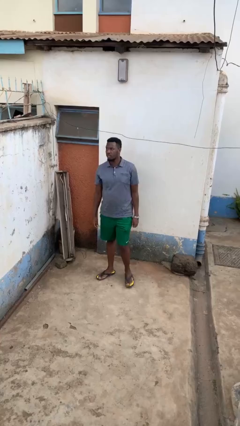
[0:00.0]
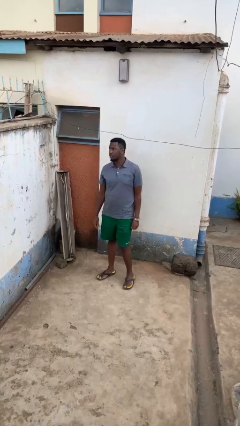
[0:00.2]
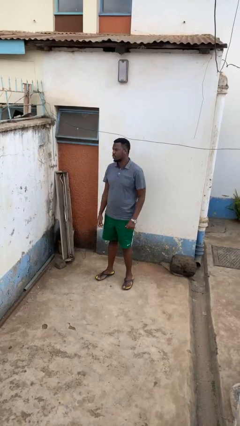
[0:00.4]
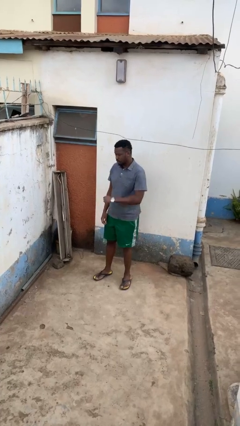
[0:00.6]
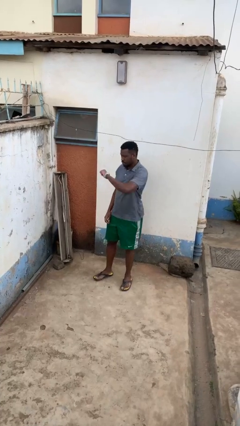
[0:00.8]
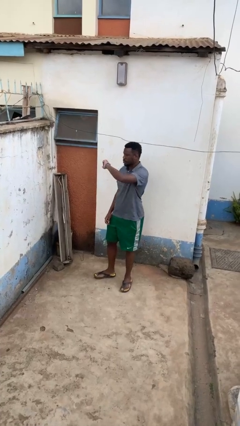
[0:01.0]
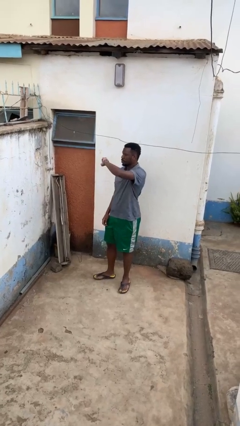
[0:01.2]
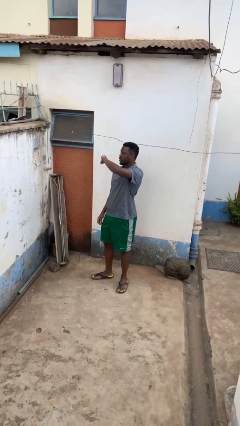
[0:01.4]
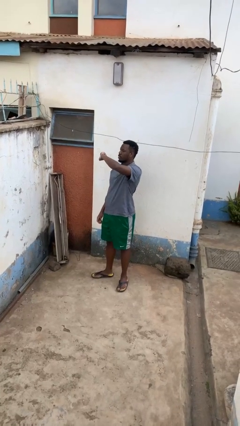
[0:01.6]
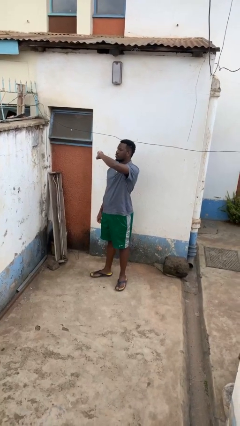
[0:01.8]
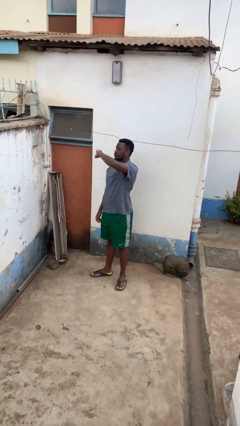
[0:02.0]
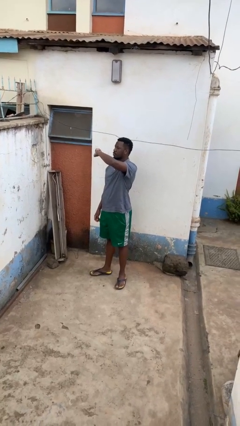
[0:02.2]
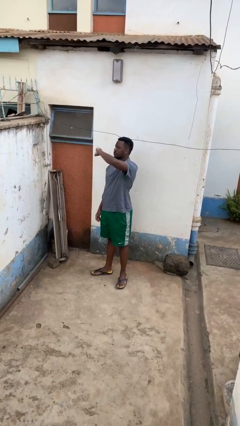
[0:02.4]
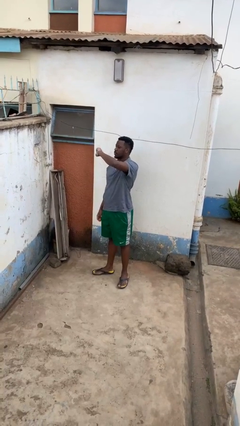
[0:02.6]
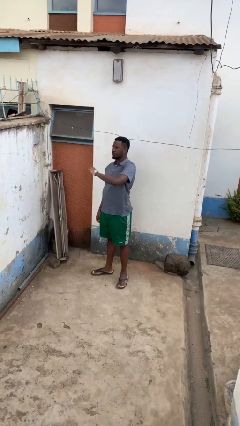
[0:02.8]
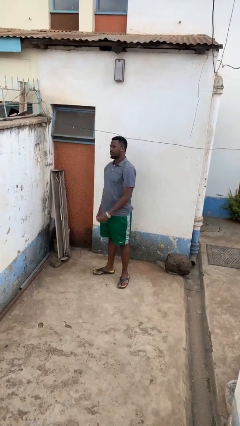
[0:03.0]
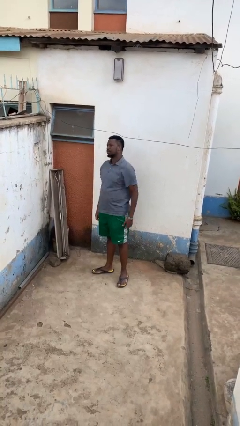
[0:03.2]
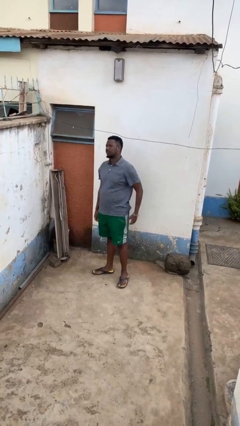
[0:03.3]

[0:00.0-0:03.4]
person looks at wristwatch

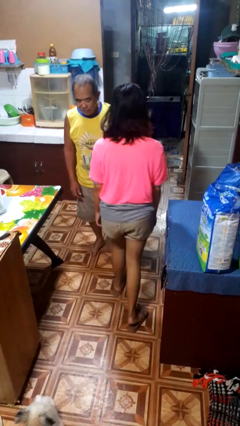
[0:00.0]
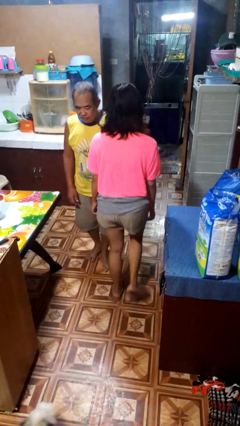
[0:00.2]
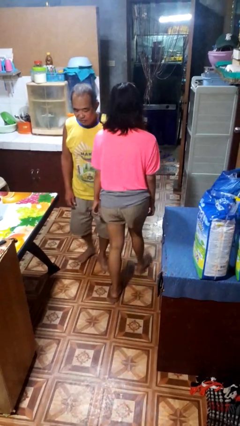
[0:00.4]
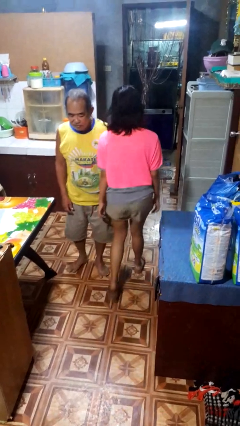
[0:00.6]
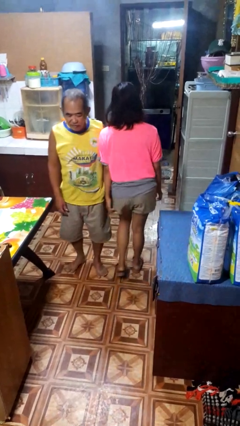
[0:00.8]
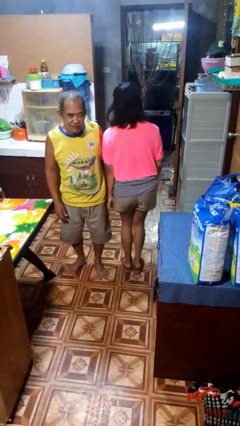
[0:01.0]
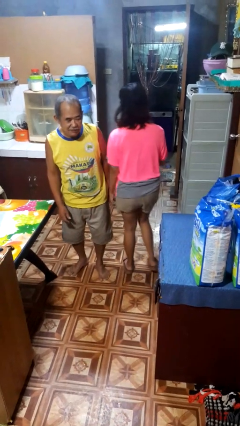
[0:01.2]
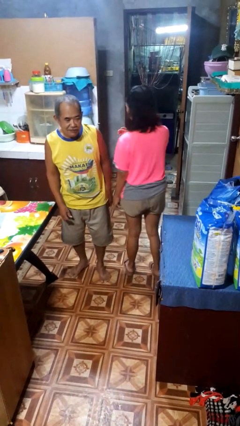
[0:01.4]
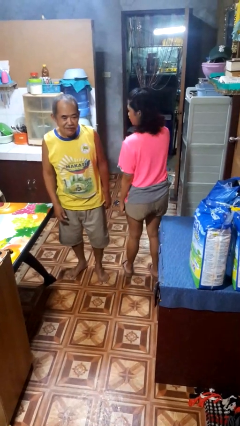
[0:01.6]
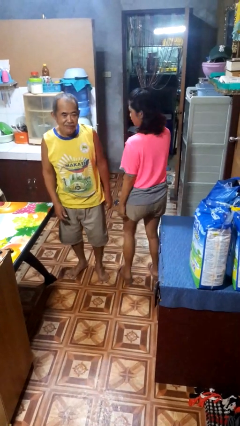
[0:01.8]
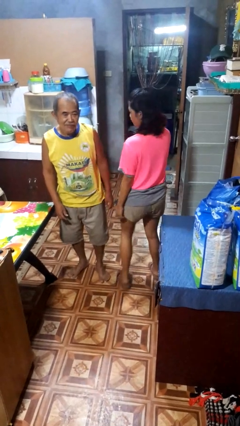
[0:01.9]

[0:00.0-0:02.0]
person bumps into person

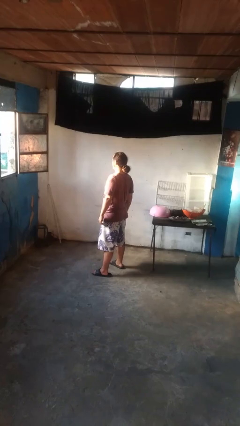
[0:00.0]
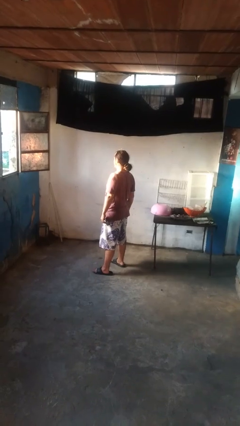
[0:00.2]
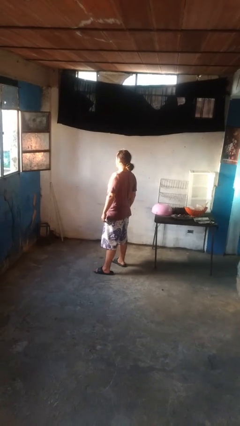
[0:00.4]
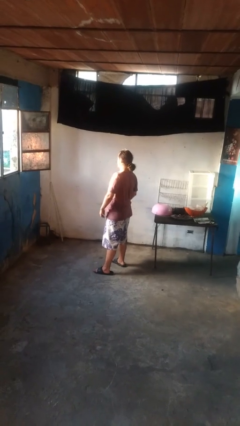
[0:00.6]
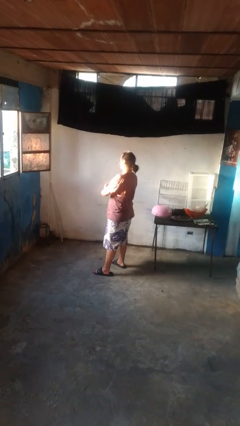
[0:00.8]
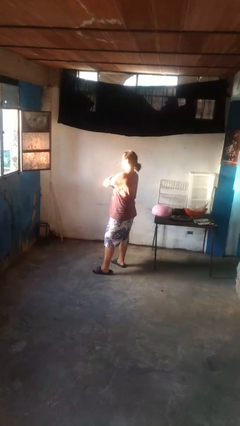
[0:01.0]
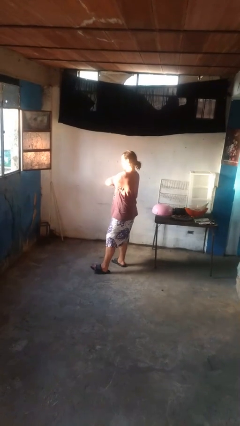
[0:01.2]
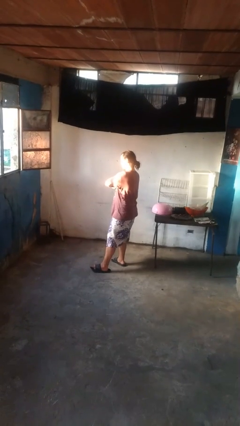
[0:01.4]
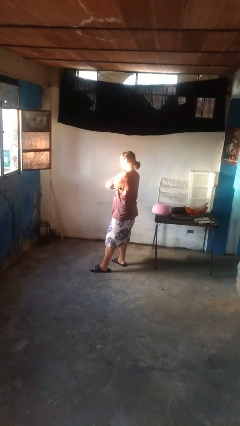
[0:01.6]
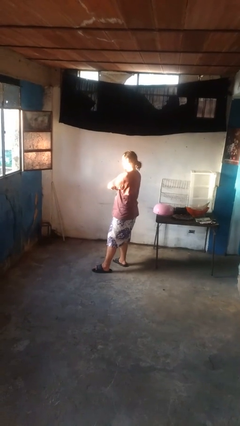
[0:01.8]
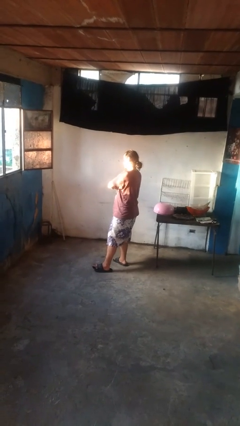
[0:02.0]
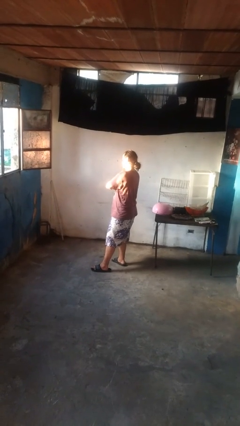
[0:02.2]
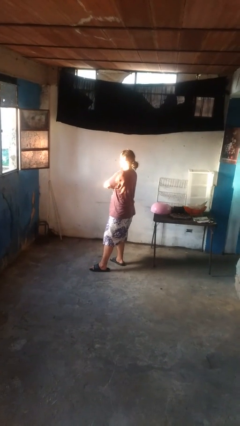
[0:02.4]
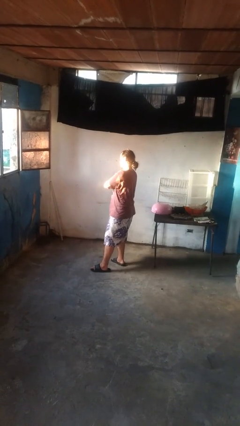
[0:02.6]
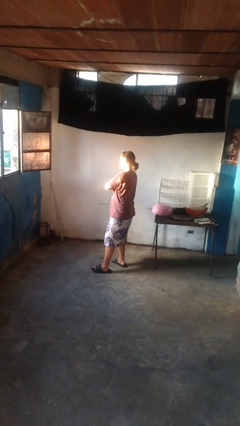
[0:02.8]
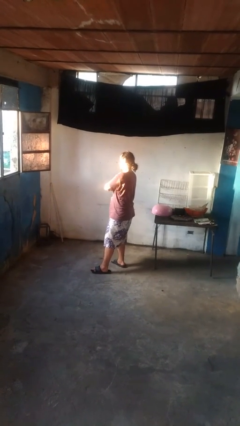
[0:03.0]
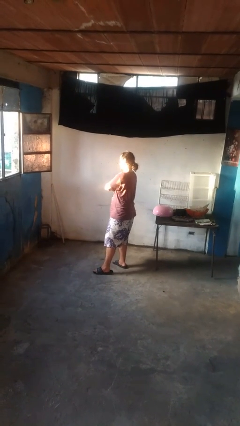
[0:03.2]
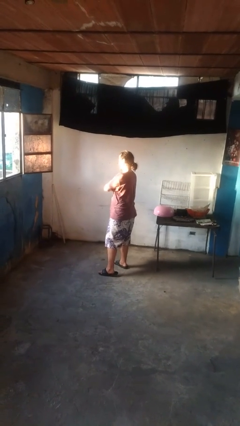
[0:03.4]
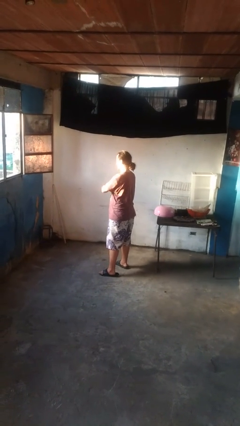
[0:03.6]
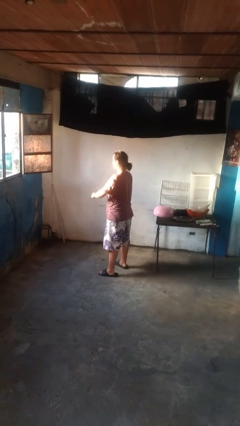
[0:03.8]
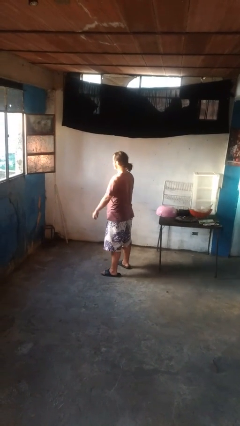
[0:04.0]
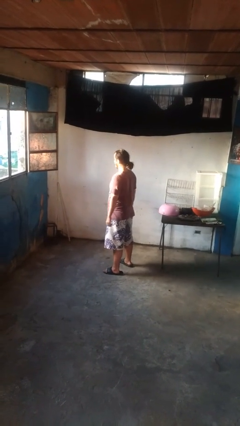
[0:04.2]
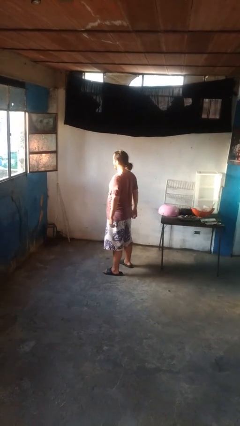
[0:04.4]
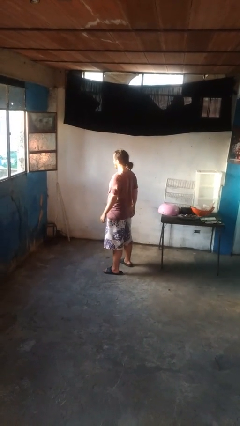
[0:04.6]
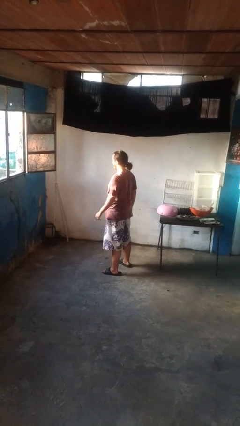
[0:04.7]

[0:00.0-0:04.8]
person gestures arms x

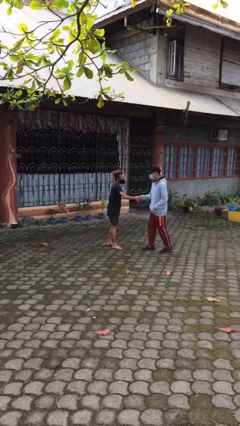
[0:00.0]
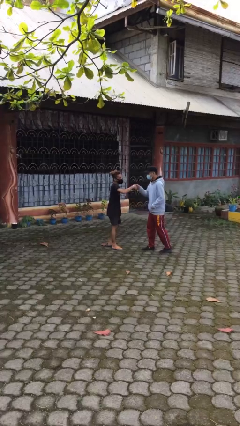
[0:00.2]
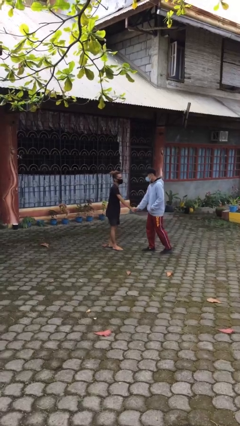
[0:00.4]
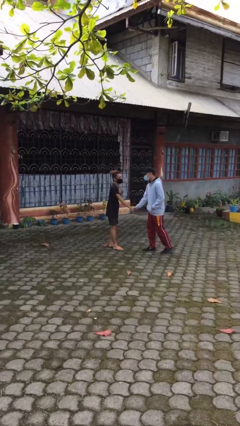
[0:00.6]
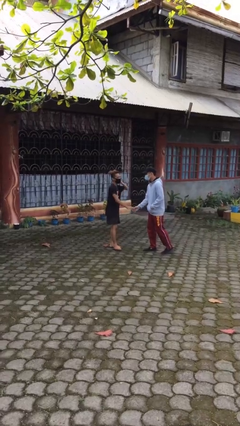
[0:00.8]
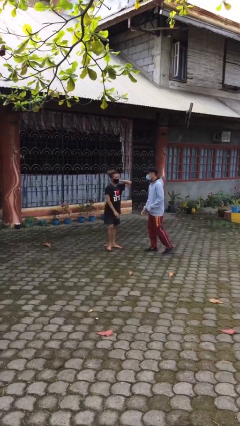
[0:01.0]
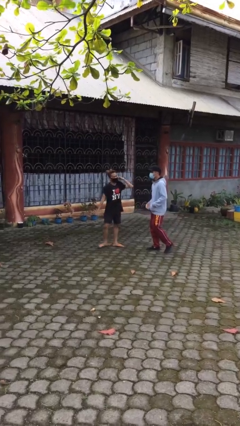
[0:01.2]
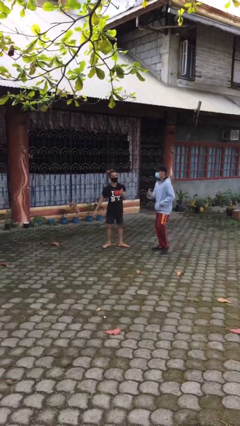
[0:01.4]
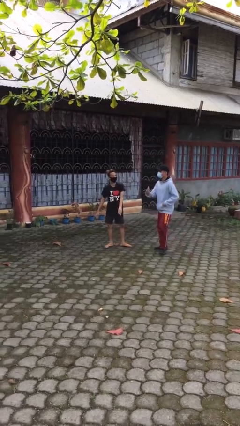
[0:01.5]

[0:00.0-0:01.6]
person shakes hand

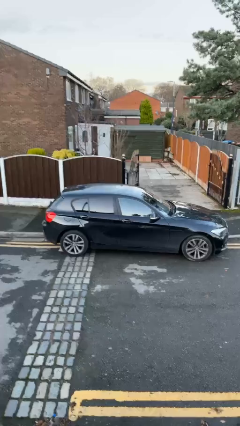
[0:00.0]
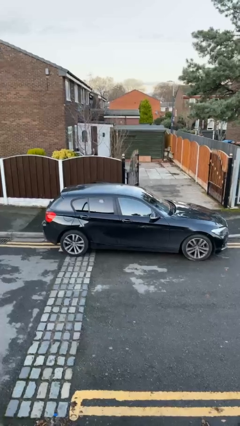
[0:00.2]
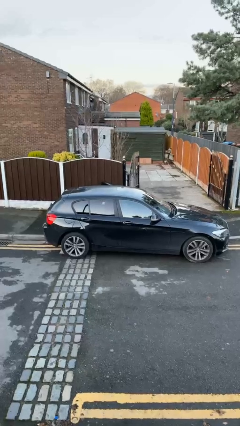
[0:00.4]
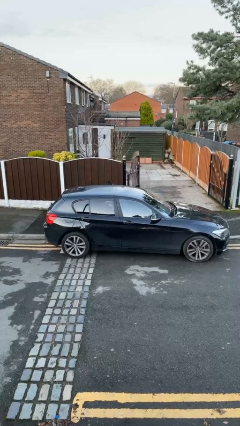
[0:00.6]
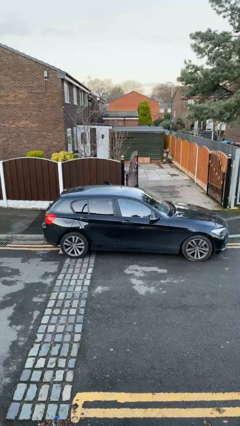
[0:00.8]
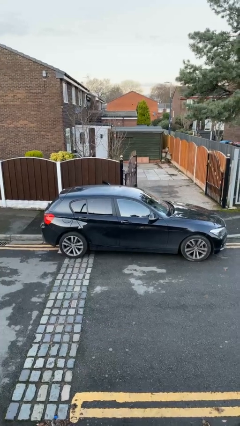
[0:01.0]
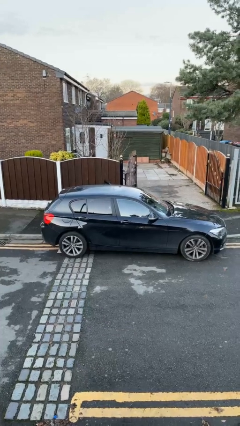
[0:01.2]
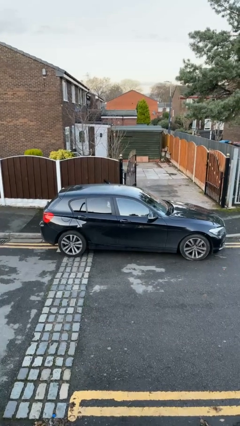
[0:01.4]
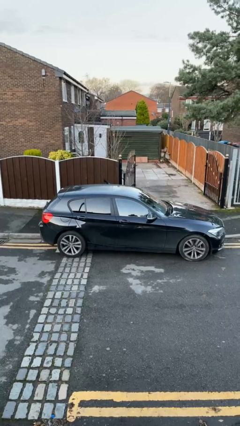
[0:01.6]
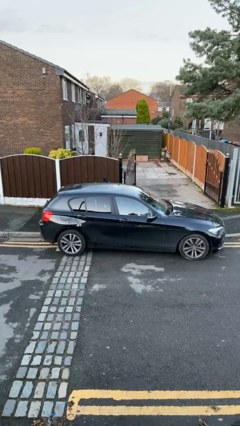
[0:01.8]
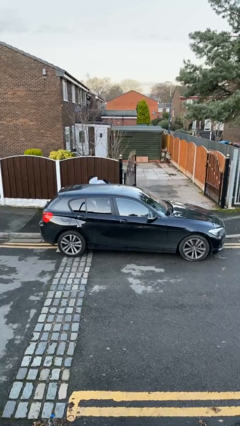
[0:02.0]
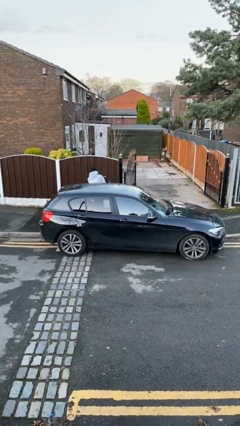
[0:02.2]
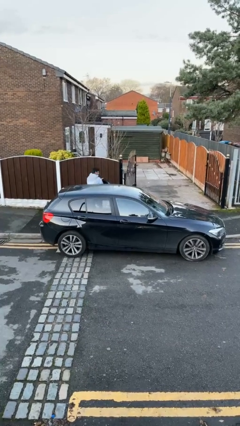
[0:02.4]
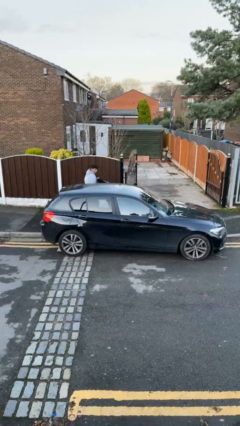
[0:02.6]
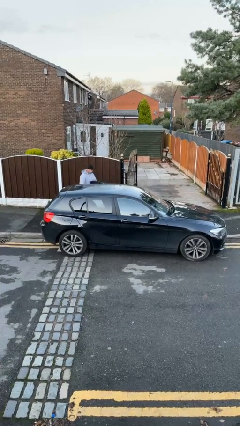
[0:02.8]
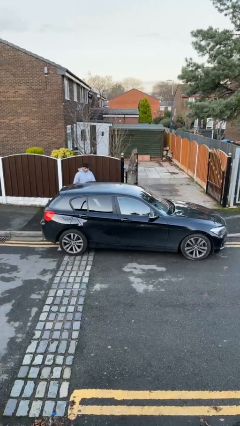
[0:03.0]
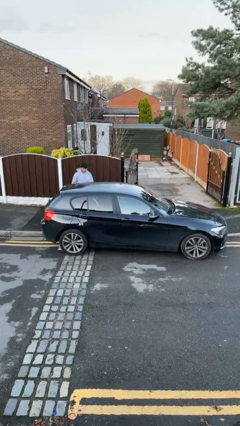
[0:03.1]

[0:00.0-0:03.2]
car drops off person

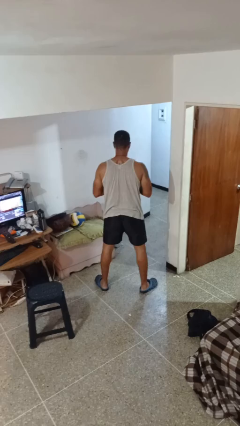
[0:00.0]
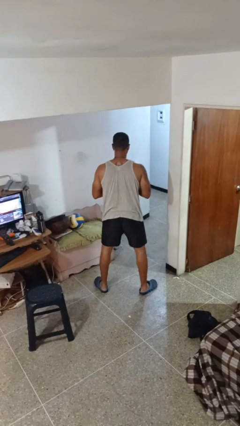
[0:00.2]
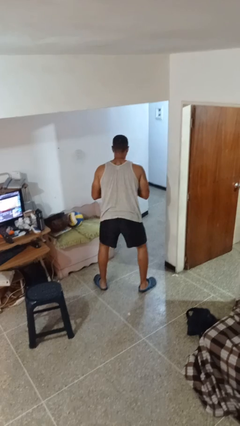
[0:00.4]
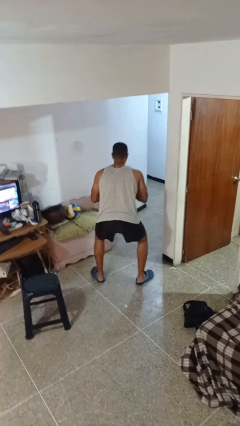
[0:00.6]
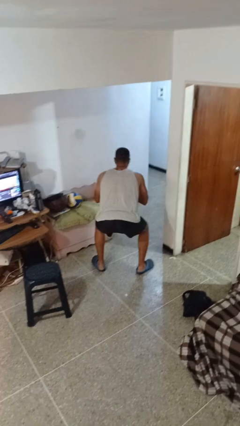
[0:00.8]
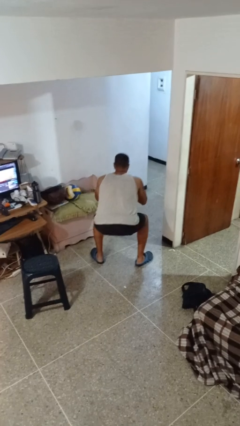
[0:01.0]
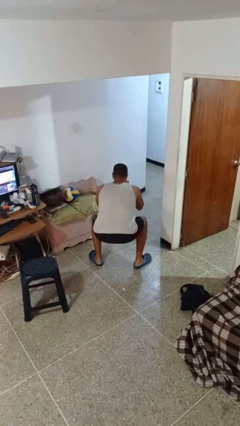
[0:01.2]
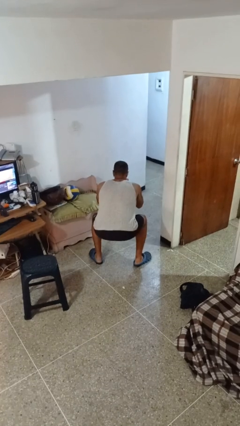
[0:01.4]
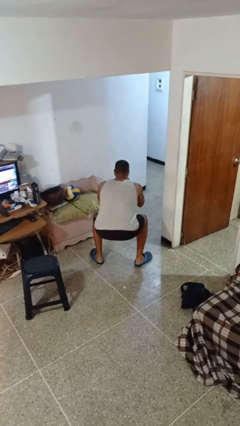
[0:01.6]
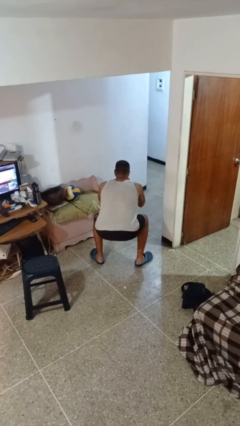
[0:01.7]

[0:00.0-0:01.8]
person squats

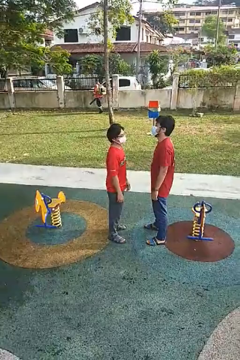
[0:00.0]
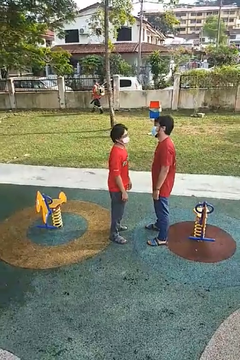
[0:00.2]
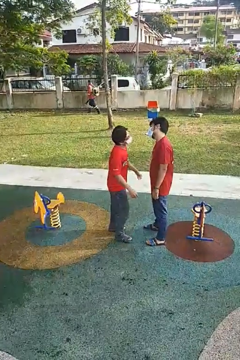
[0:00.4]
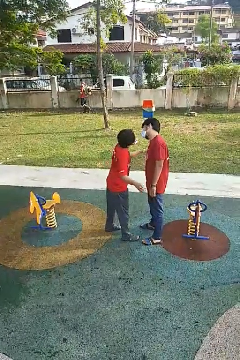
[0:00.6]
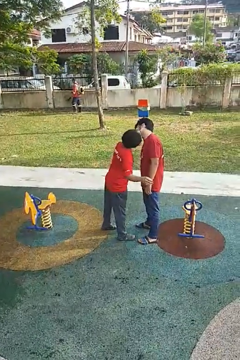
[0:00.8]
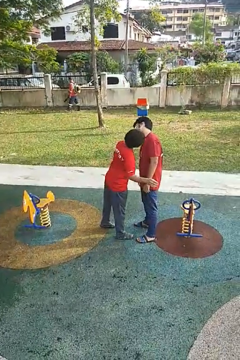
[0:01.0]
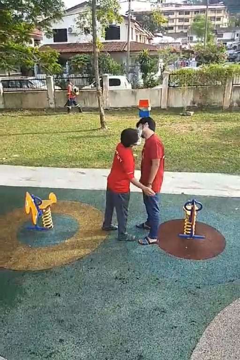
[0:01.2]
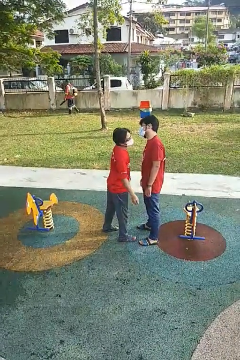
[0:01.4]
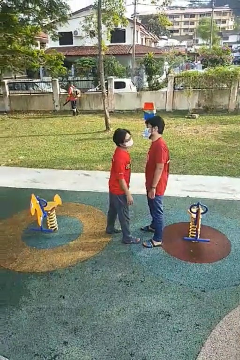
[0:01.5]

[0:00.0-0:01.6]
person kisses cheek of person
